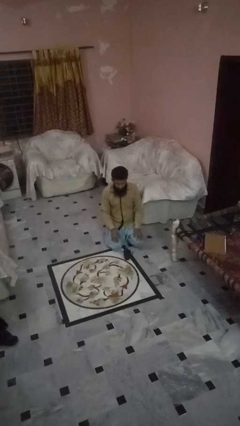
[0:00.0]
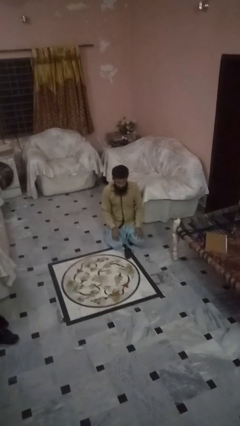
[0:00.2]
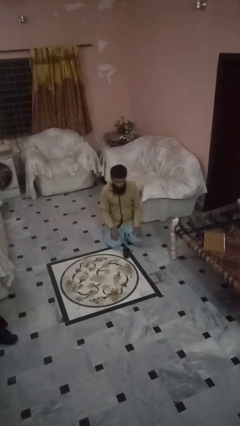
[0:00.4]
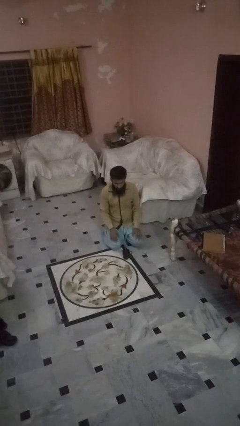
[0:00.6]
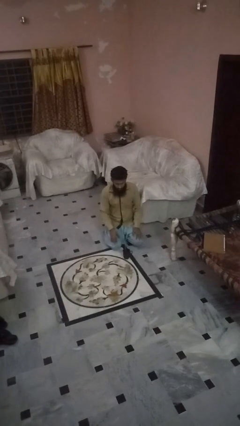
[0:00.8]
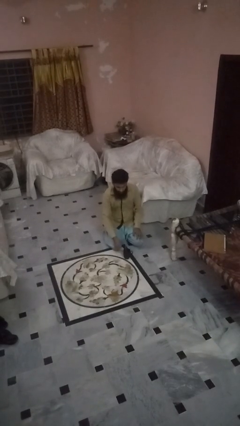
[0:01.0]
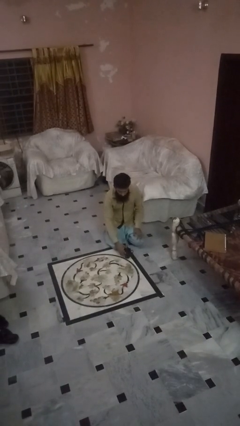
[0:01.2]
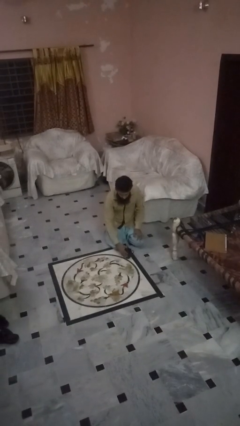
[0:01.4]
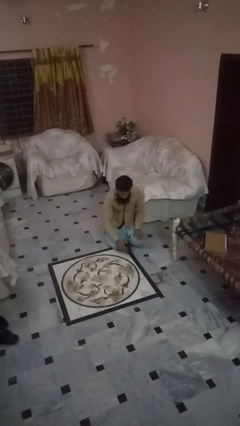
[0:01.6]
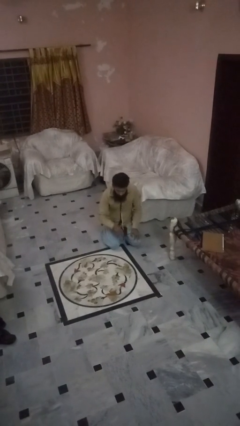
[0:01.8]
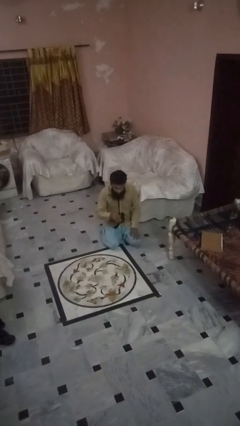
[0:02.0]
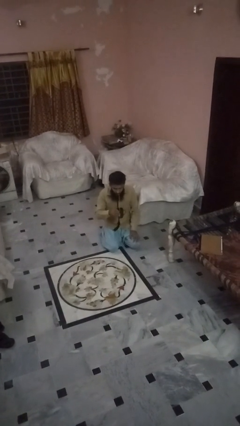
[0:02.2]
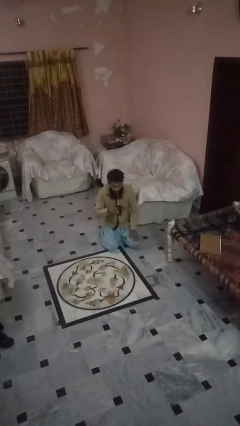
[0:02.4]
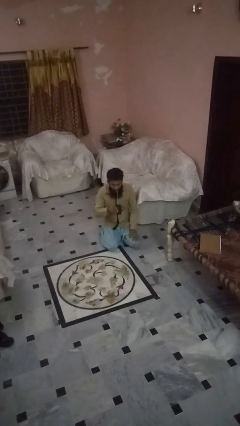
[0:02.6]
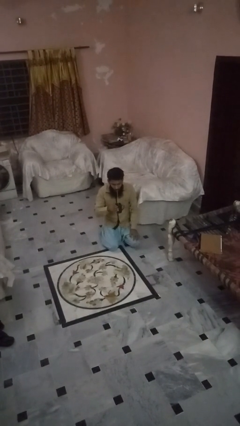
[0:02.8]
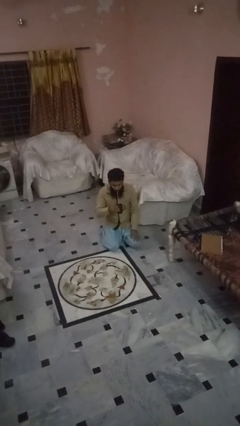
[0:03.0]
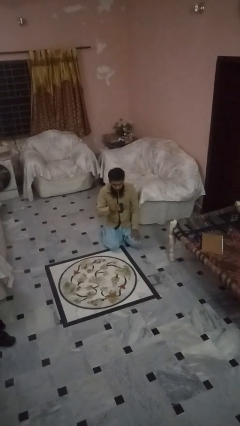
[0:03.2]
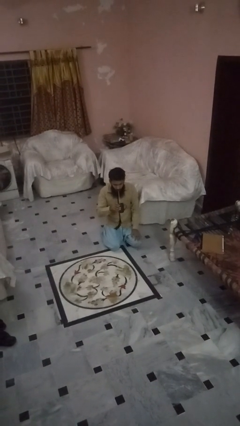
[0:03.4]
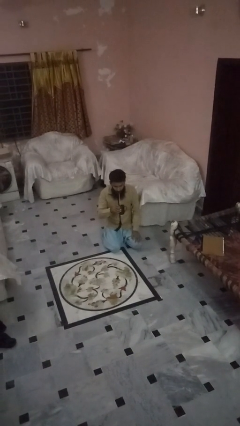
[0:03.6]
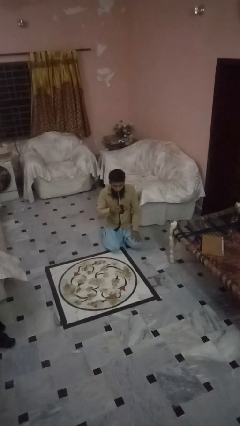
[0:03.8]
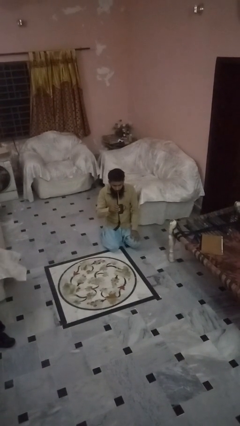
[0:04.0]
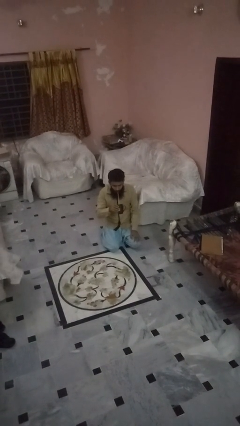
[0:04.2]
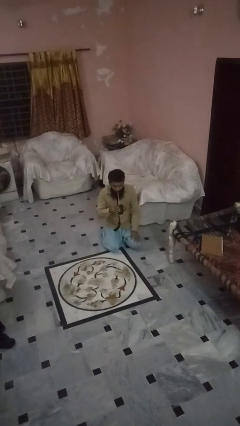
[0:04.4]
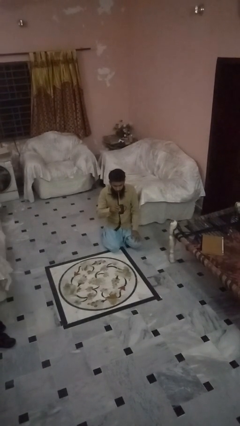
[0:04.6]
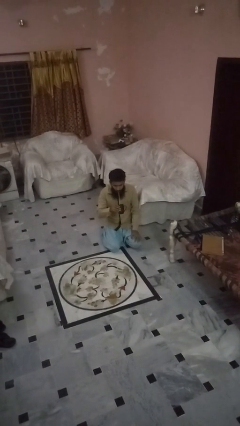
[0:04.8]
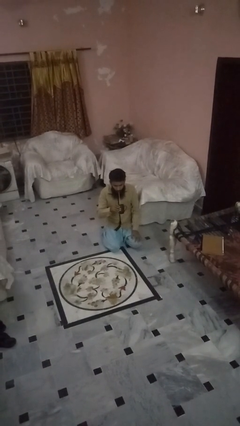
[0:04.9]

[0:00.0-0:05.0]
person drinks from straw

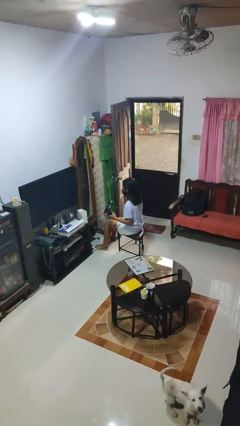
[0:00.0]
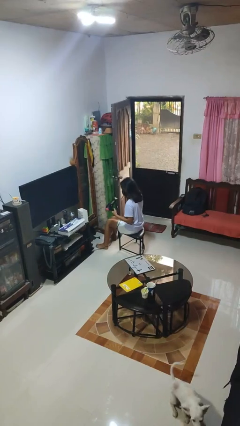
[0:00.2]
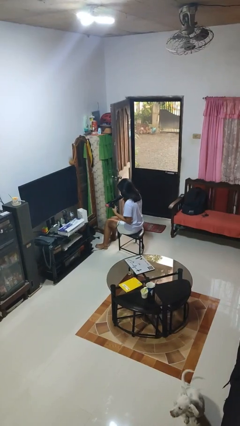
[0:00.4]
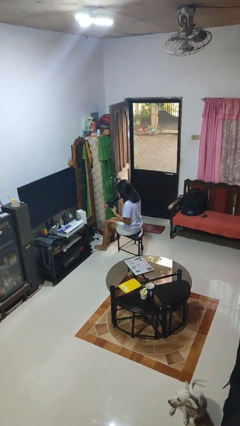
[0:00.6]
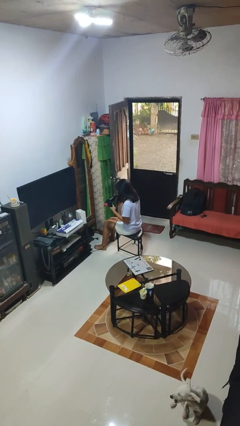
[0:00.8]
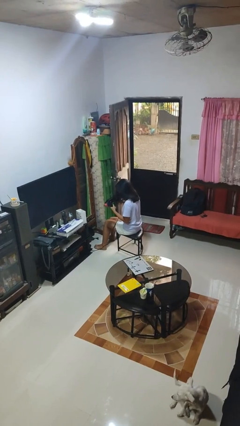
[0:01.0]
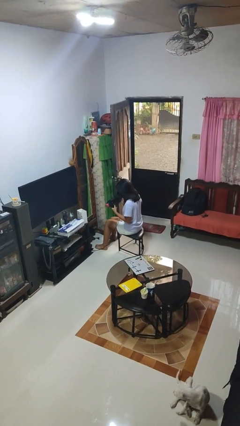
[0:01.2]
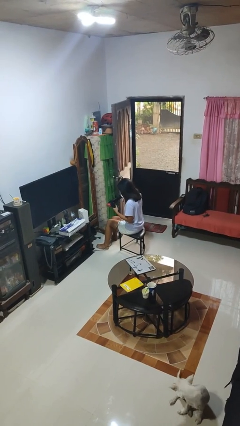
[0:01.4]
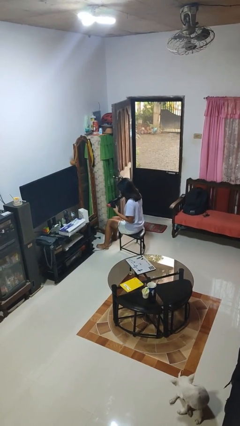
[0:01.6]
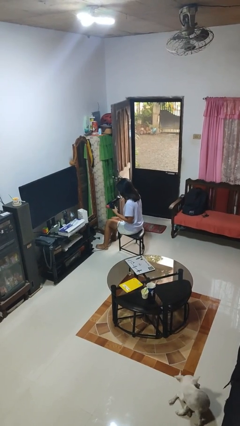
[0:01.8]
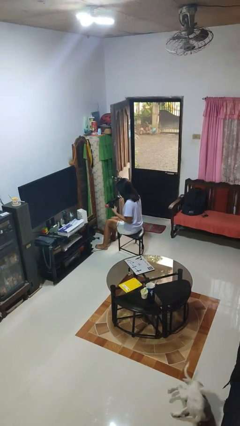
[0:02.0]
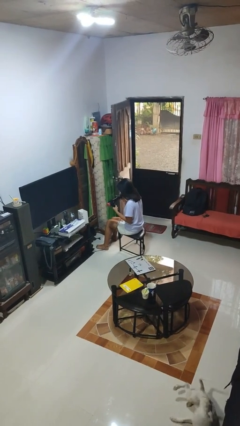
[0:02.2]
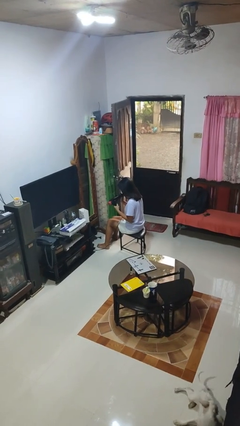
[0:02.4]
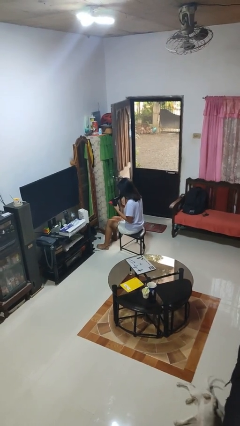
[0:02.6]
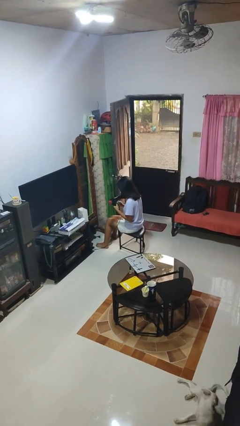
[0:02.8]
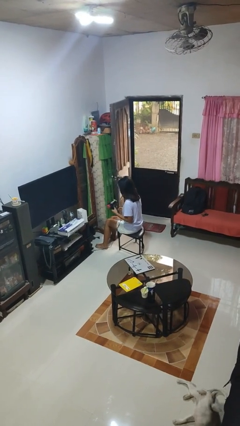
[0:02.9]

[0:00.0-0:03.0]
person dries hair with hairdryer

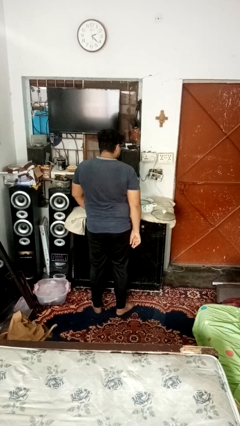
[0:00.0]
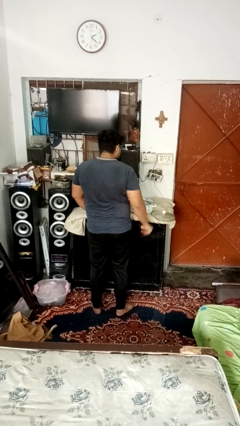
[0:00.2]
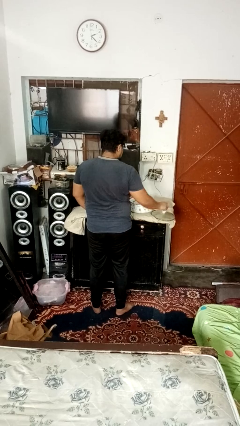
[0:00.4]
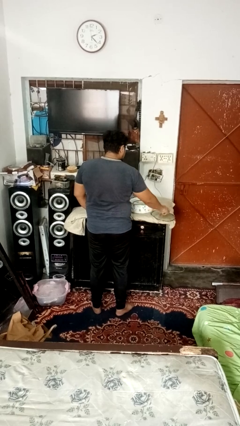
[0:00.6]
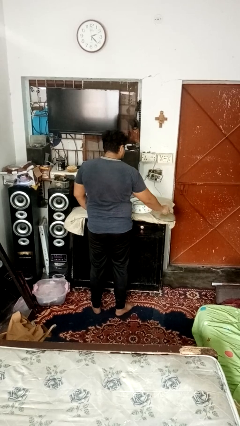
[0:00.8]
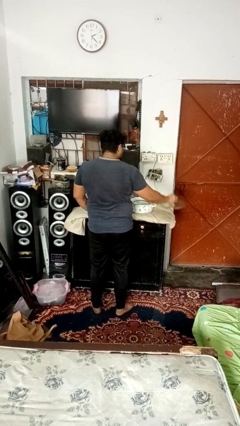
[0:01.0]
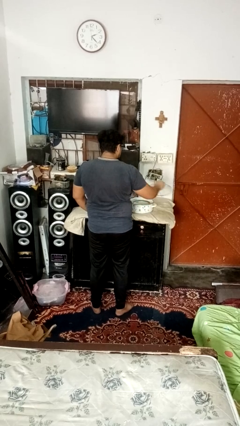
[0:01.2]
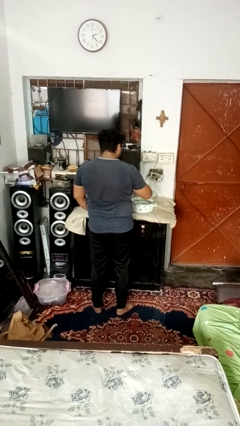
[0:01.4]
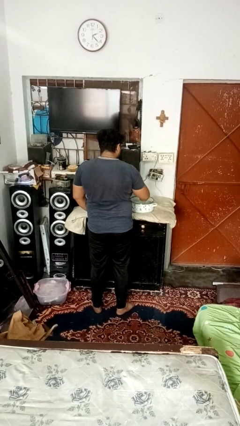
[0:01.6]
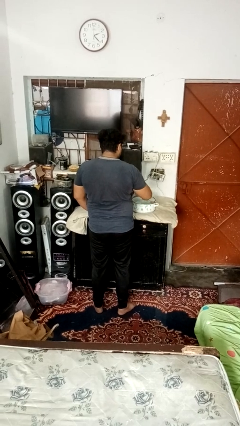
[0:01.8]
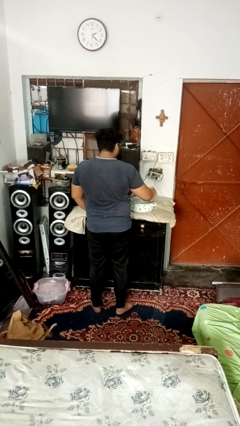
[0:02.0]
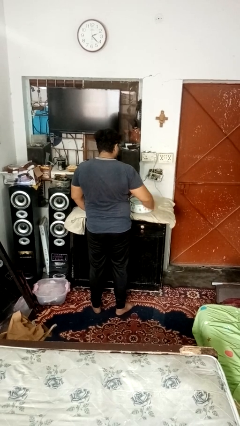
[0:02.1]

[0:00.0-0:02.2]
person closes jar

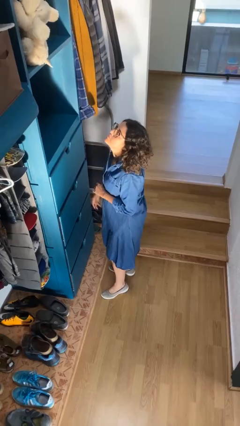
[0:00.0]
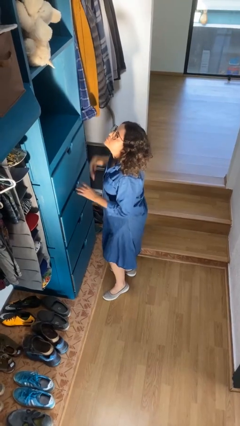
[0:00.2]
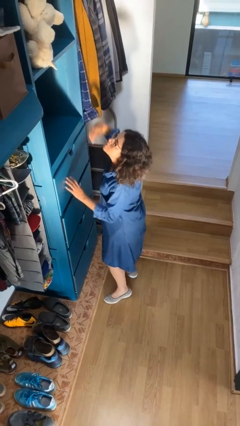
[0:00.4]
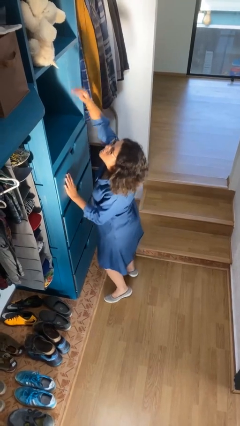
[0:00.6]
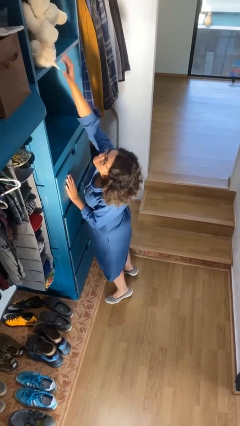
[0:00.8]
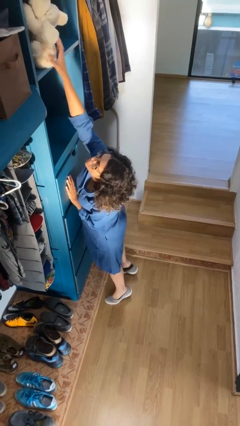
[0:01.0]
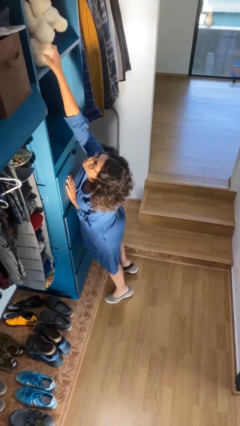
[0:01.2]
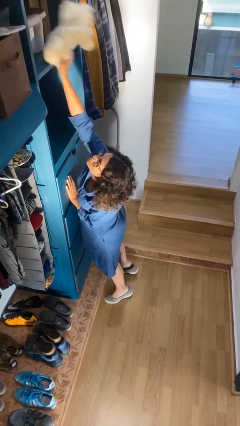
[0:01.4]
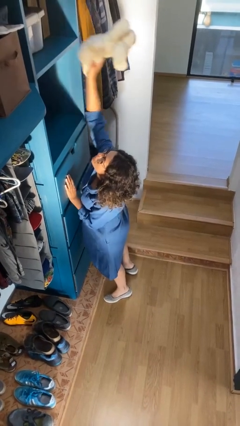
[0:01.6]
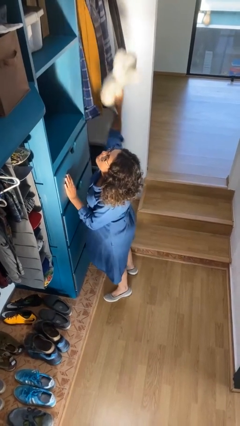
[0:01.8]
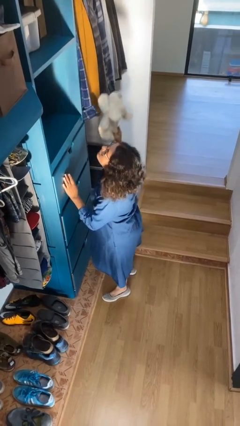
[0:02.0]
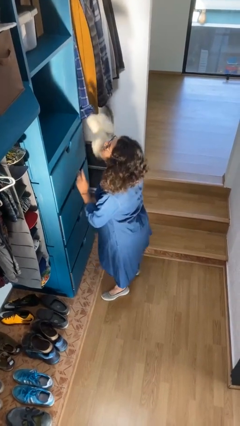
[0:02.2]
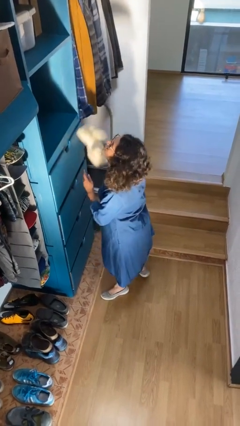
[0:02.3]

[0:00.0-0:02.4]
person picks up object from shelf

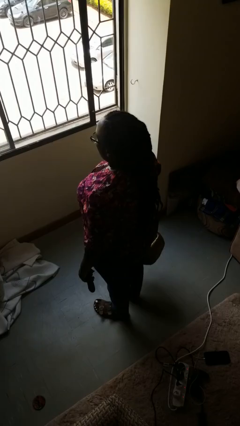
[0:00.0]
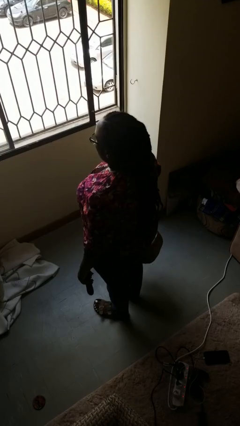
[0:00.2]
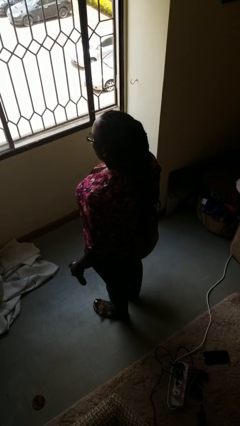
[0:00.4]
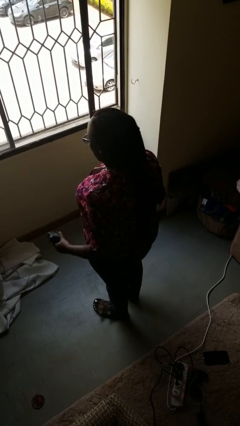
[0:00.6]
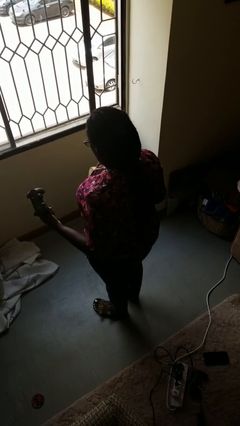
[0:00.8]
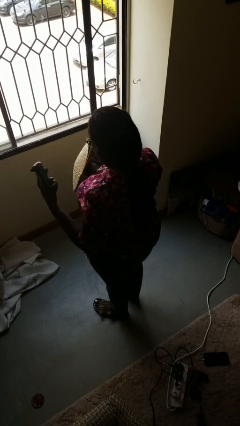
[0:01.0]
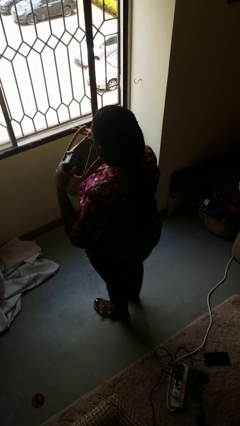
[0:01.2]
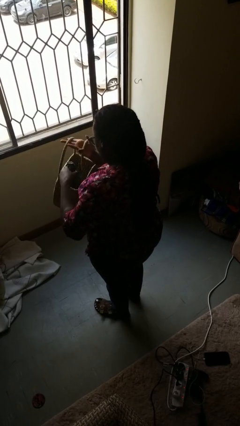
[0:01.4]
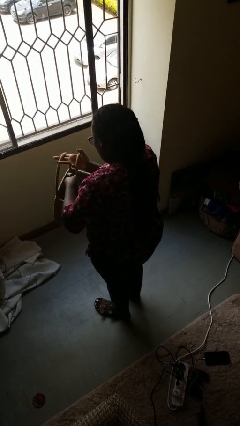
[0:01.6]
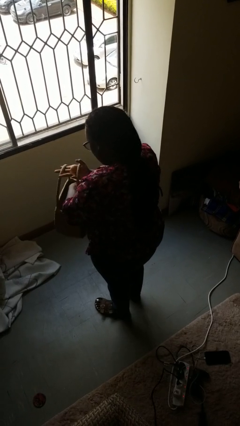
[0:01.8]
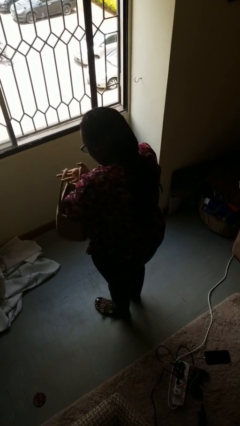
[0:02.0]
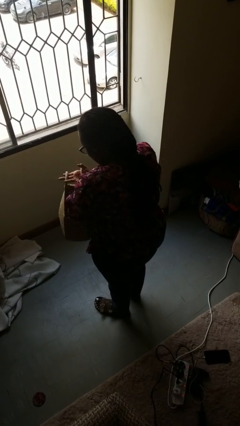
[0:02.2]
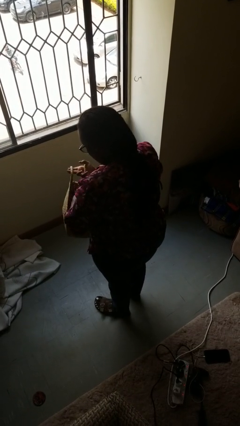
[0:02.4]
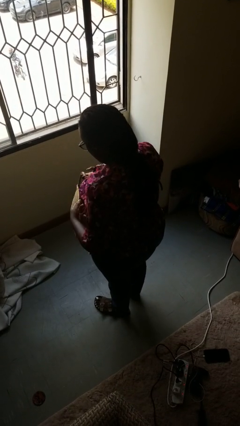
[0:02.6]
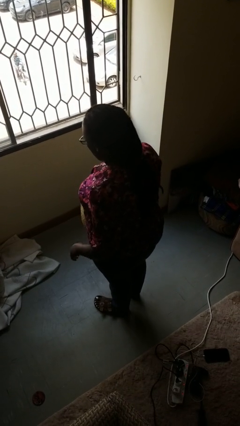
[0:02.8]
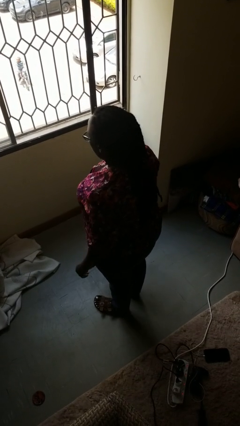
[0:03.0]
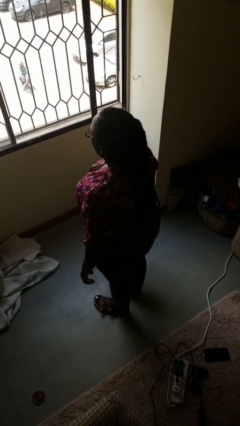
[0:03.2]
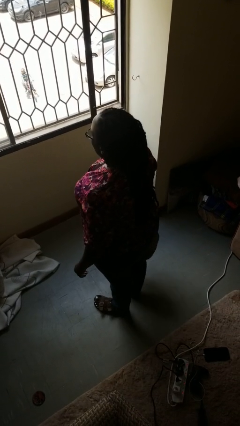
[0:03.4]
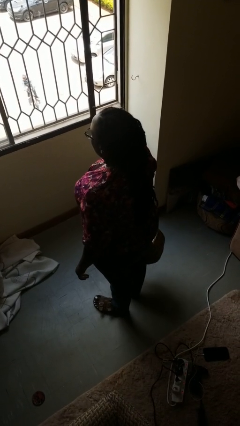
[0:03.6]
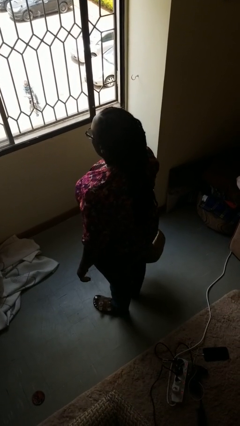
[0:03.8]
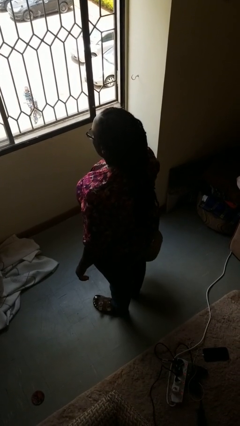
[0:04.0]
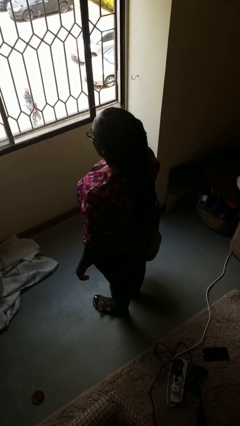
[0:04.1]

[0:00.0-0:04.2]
person puts object into basket

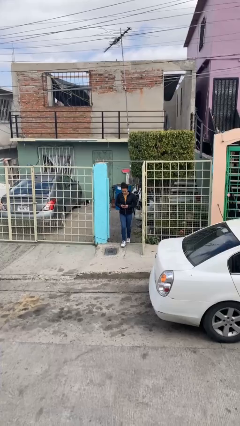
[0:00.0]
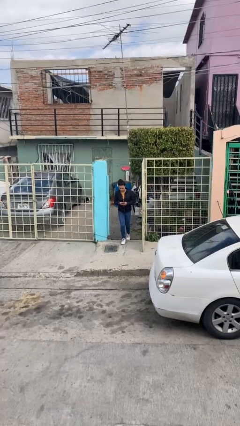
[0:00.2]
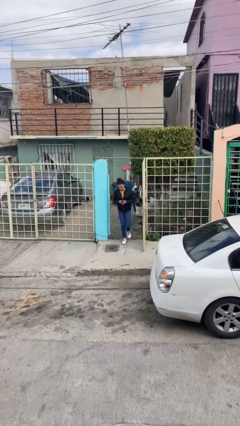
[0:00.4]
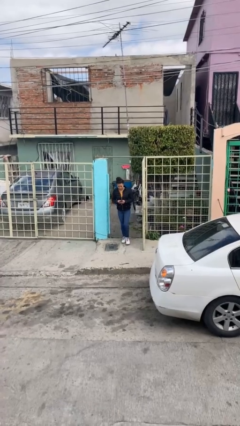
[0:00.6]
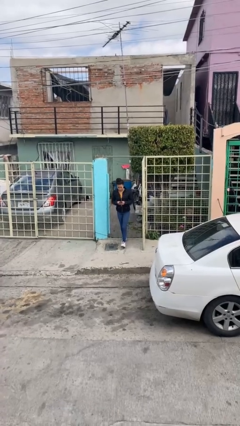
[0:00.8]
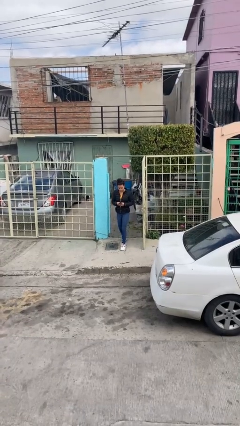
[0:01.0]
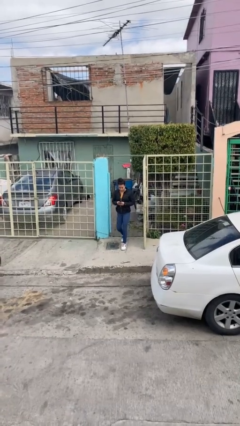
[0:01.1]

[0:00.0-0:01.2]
person enters scene through structure
